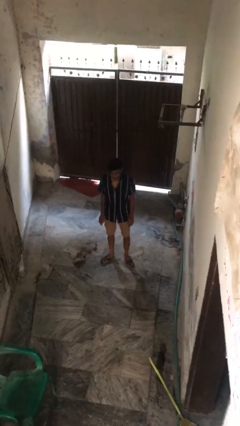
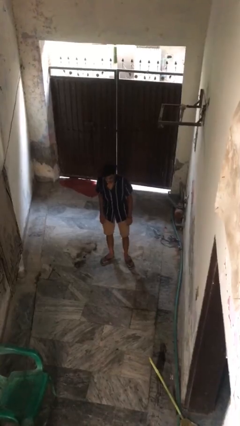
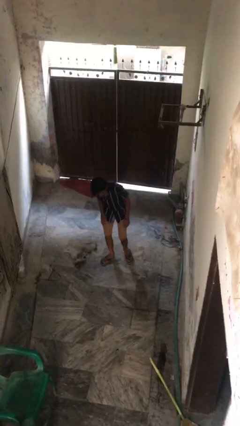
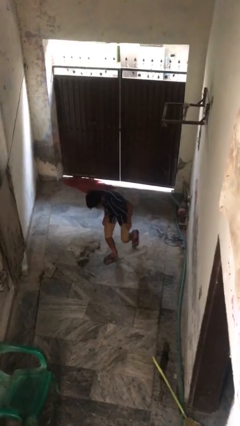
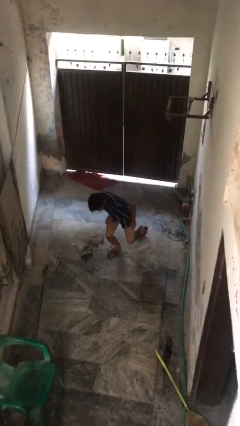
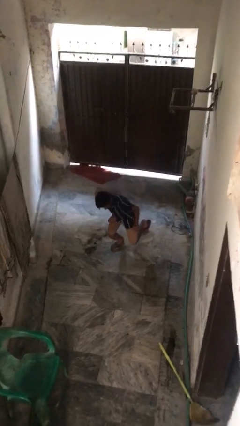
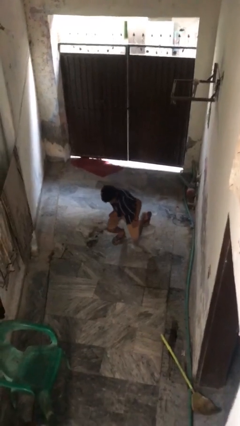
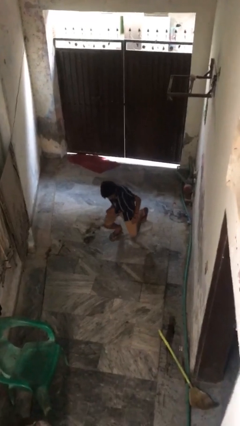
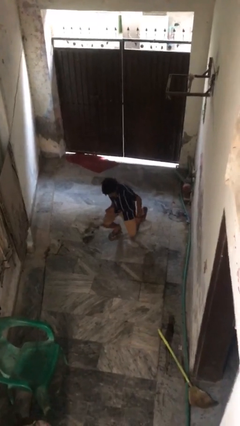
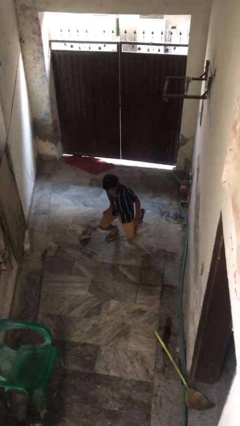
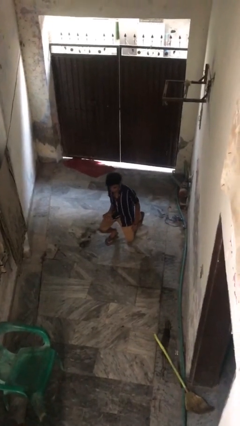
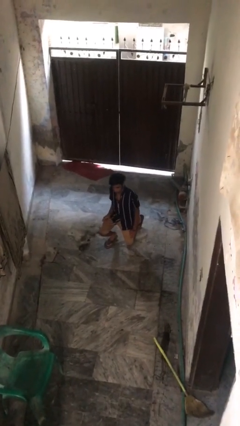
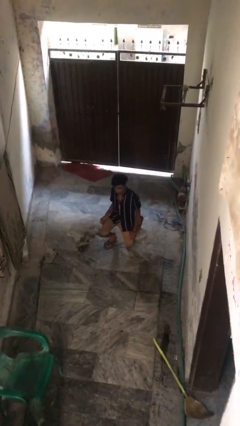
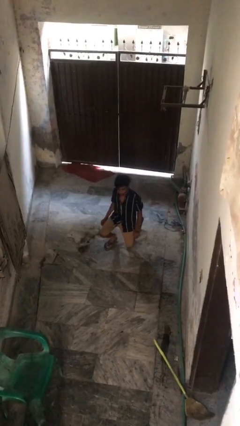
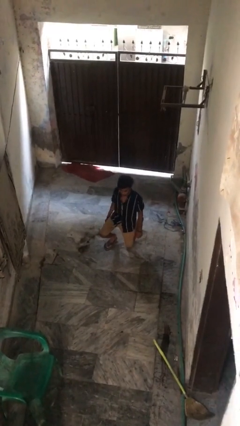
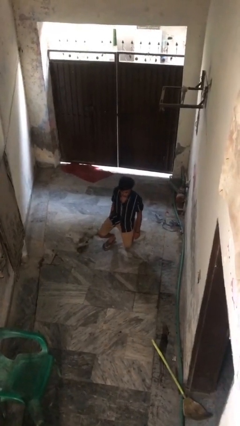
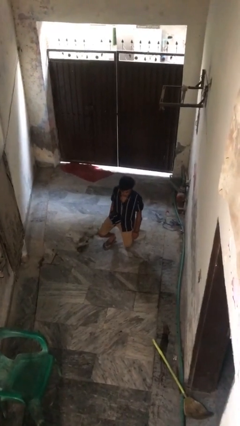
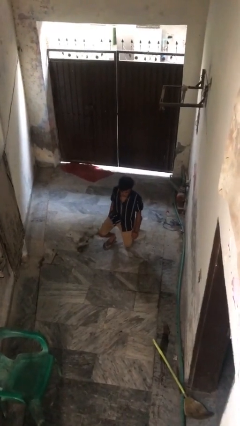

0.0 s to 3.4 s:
person kneels

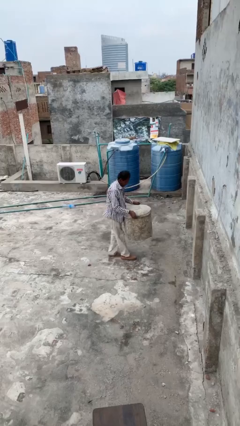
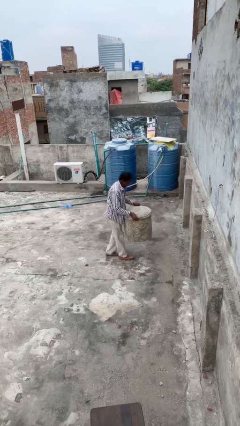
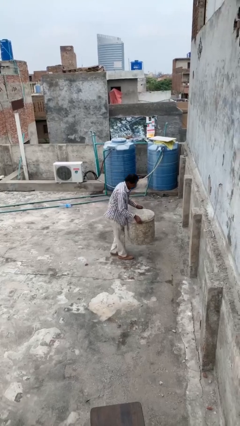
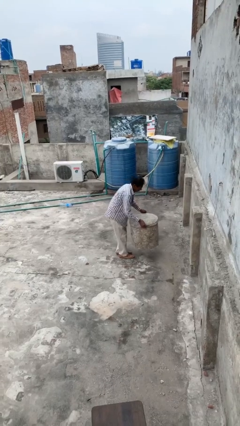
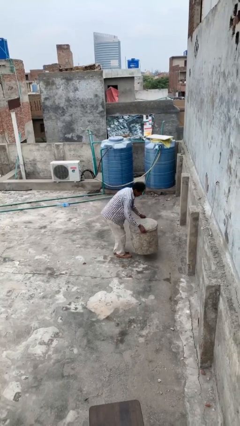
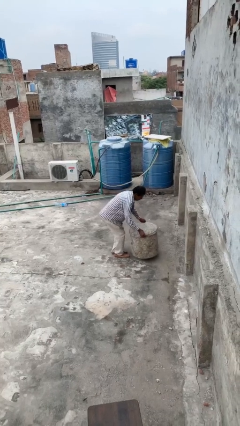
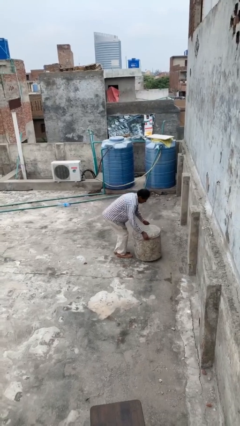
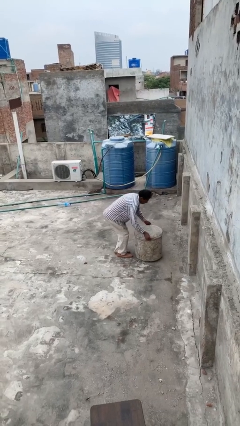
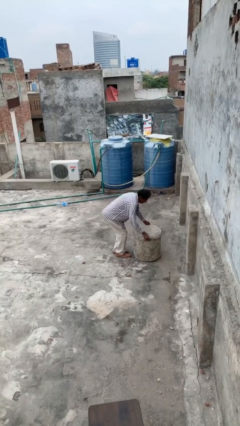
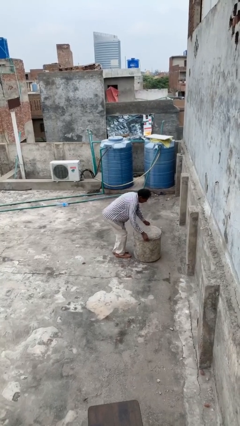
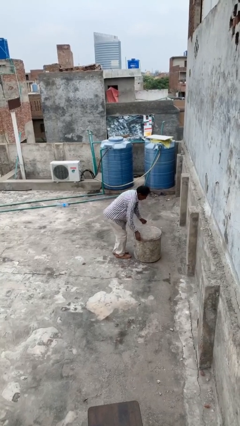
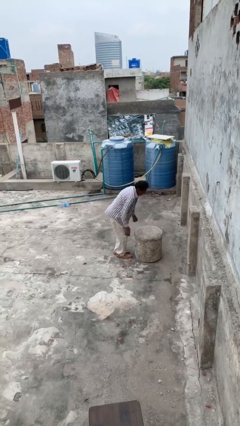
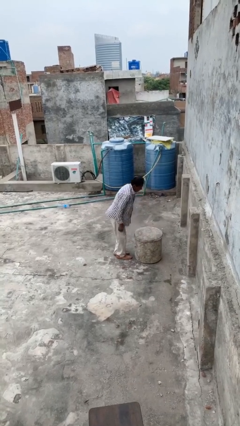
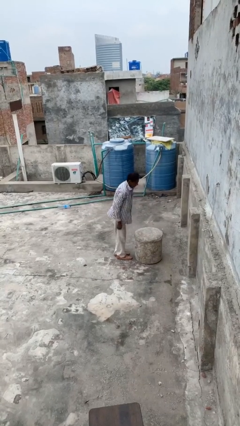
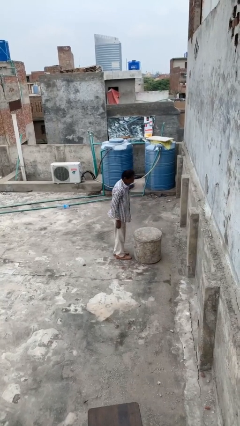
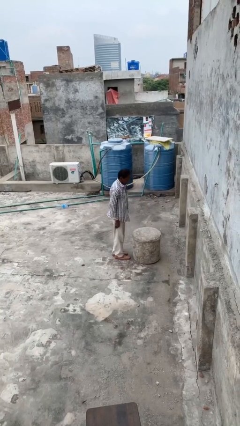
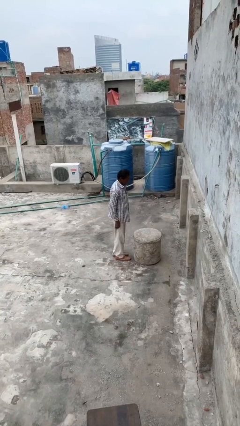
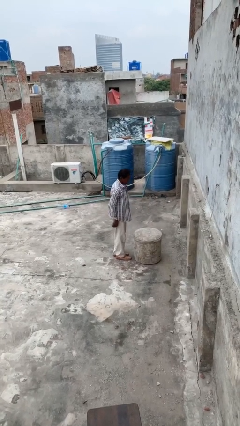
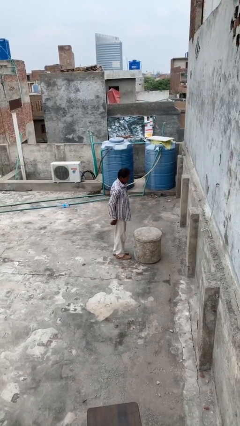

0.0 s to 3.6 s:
person puts down object on floor

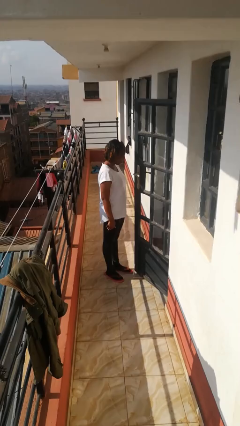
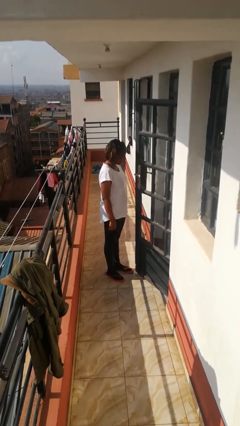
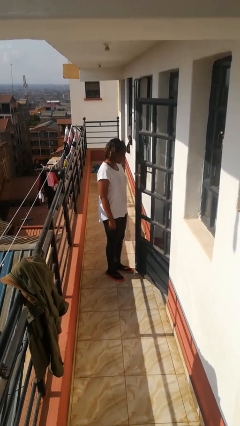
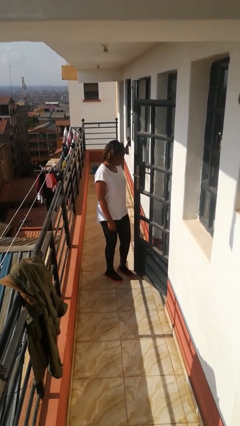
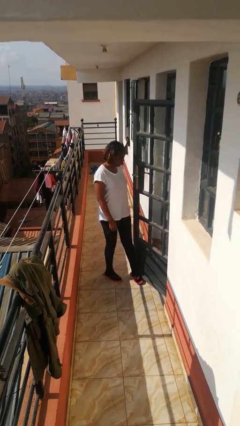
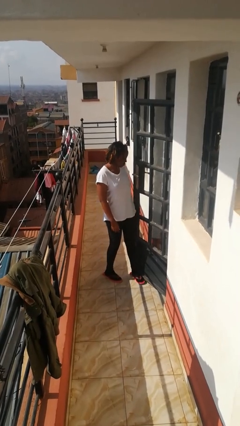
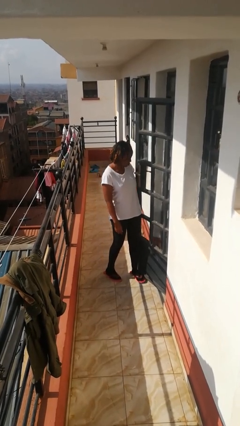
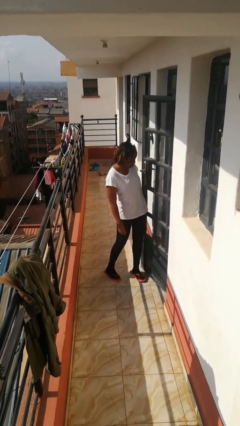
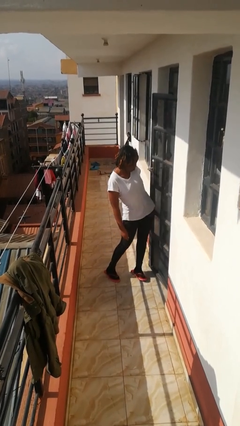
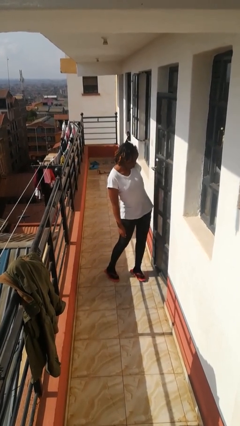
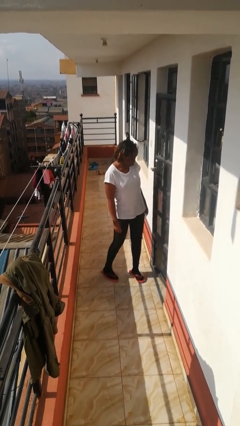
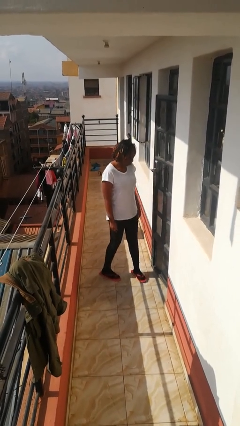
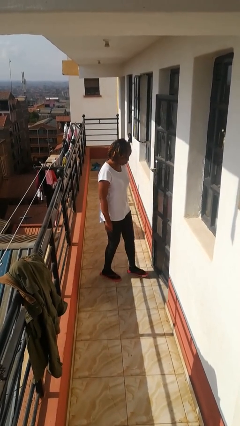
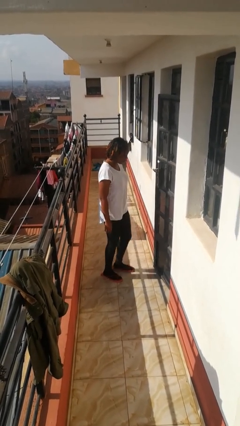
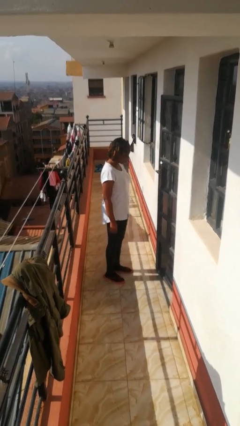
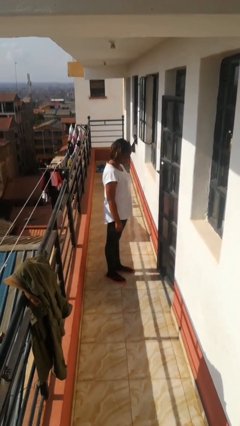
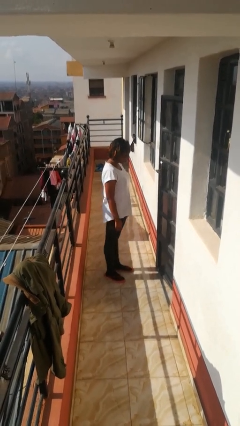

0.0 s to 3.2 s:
person closes door with hip

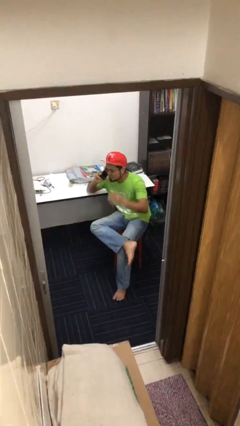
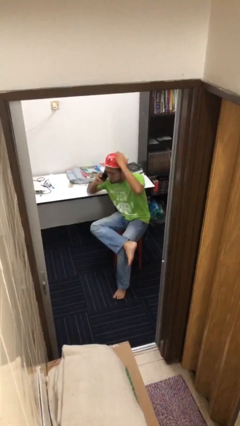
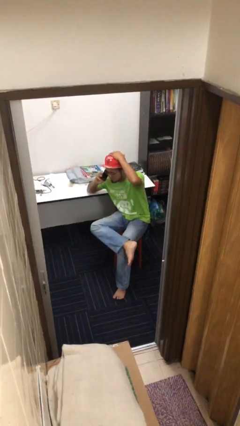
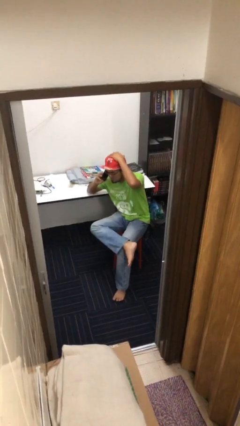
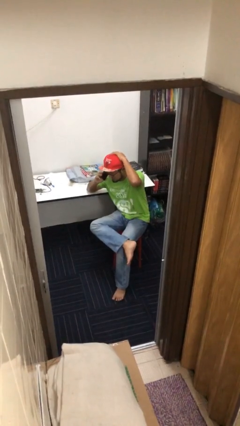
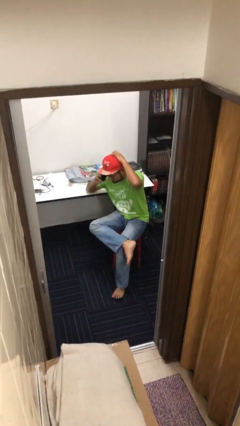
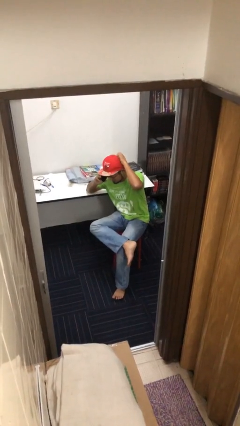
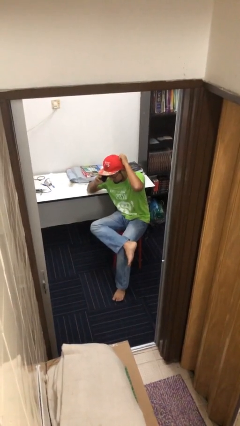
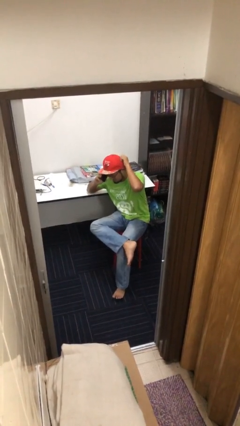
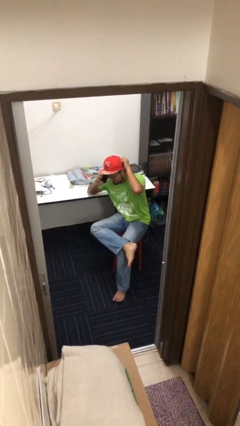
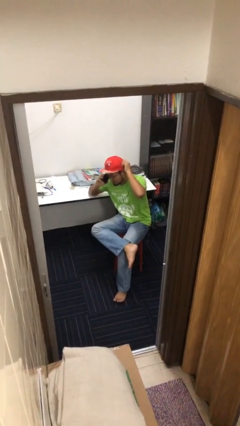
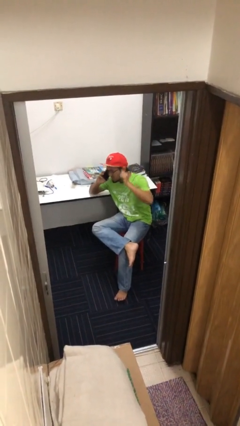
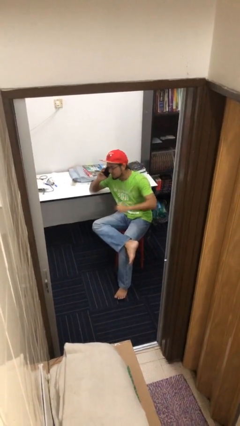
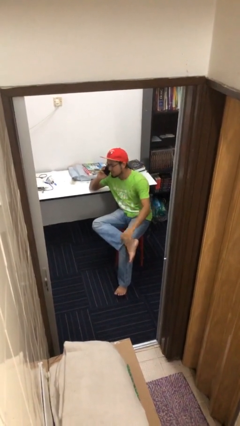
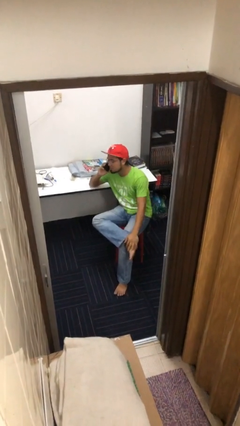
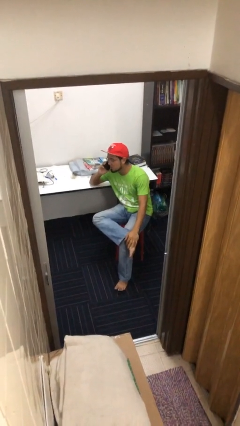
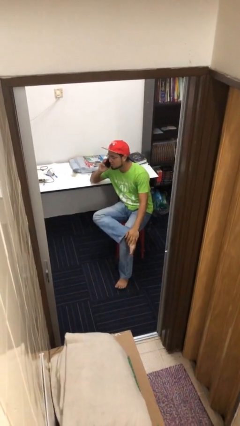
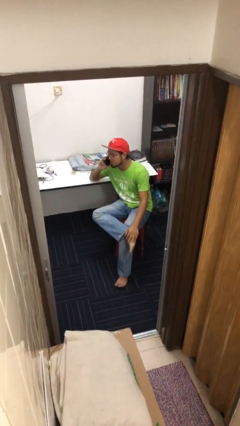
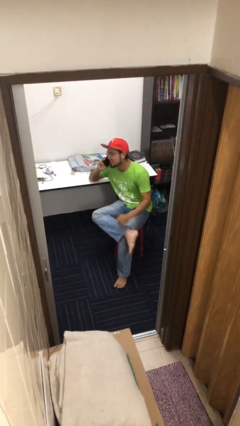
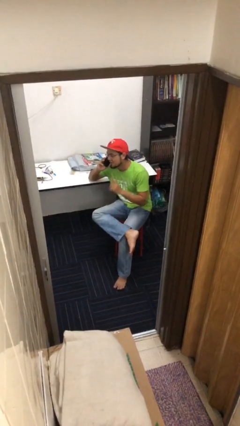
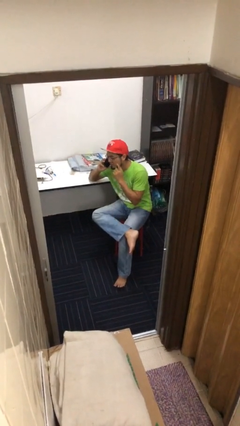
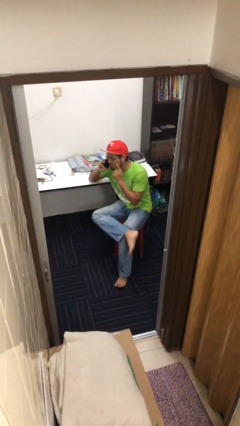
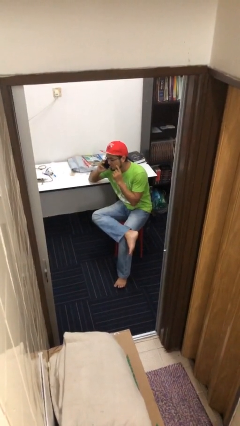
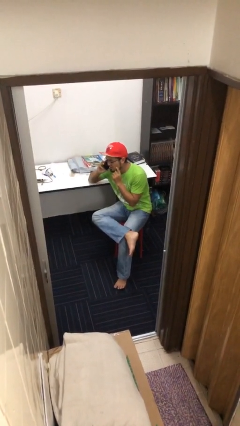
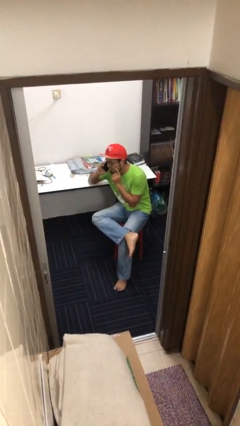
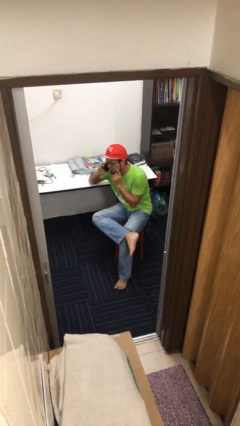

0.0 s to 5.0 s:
person talks on phone

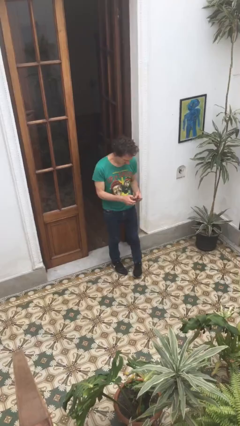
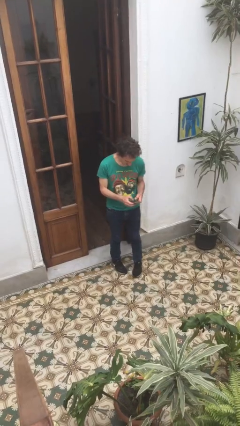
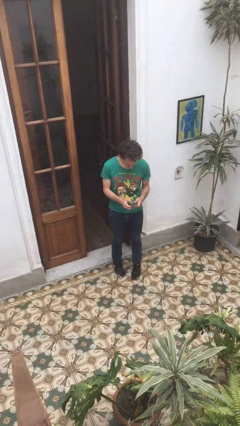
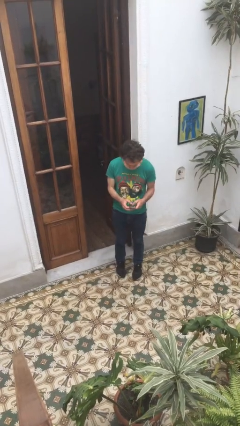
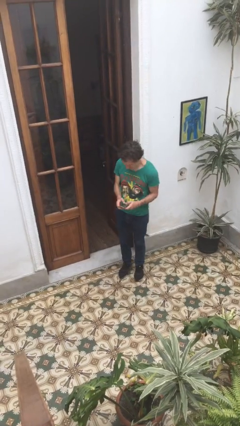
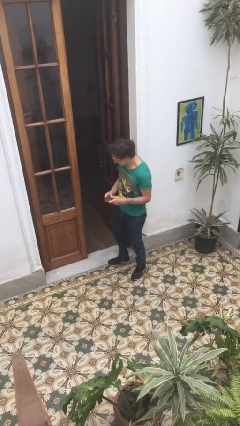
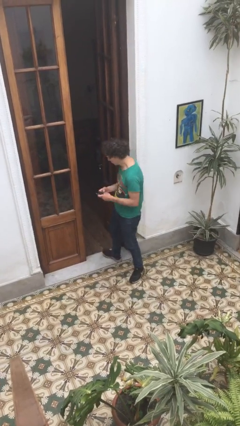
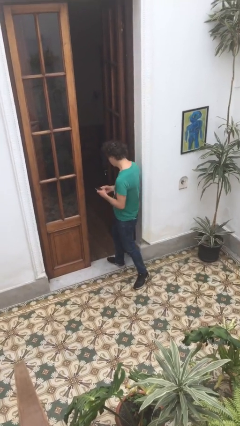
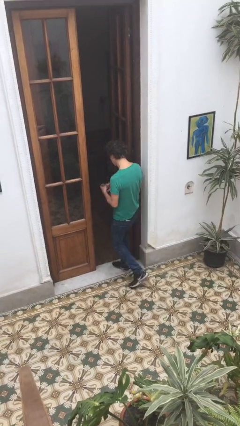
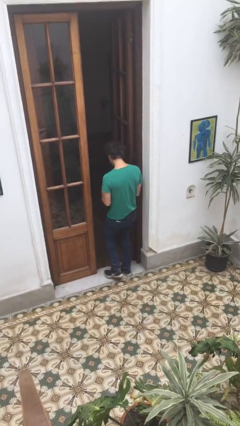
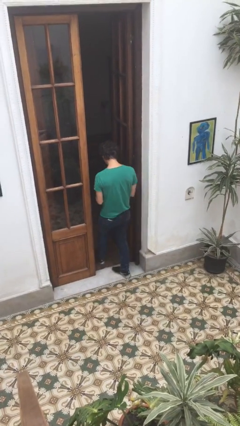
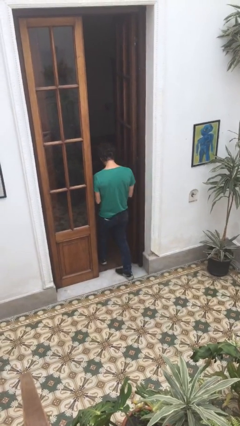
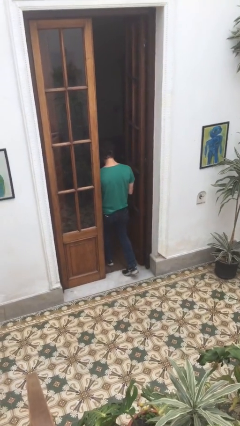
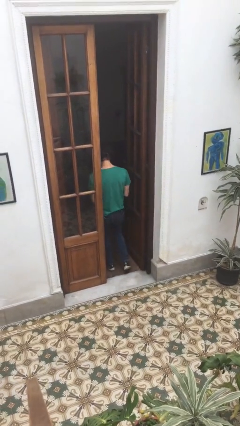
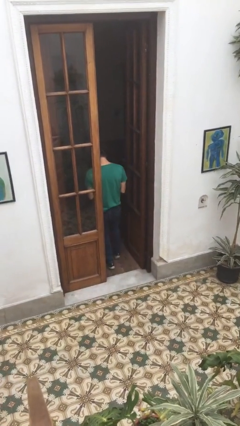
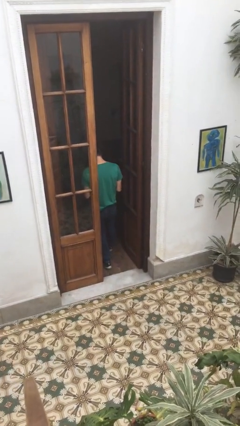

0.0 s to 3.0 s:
person exits scene through structure
